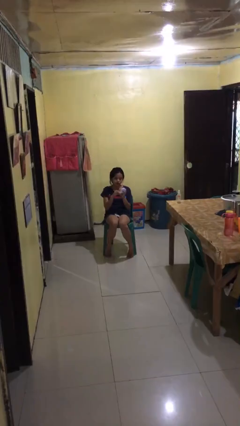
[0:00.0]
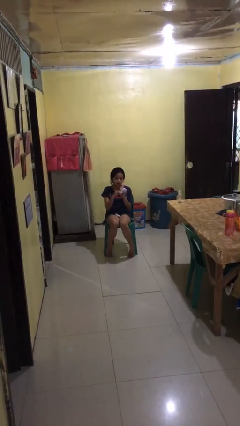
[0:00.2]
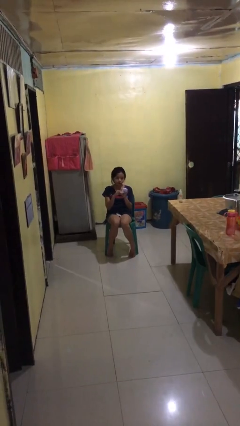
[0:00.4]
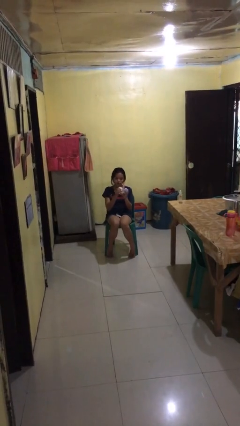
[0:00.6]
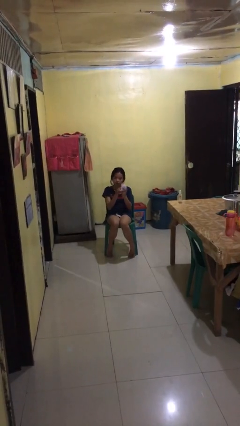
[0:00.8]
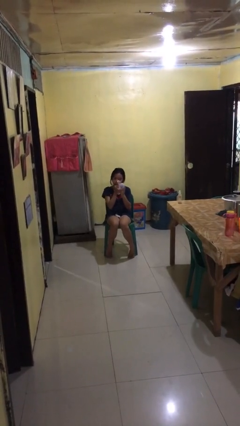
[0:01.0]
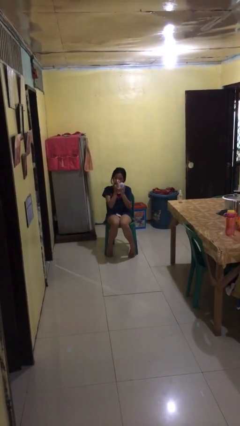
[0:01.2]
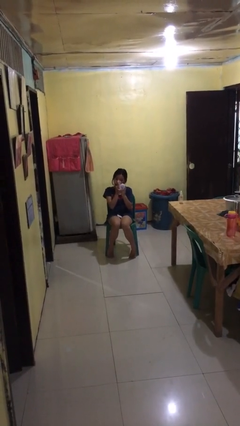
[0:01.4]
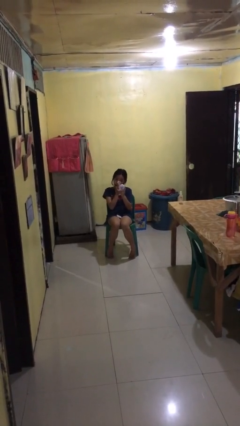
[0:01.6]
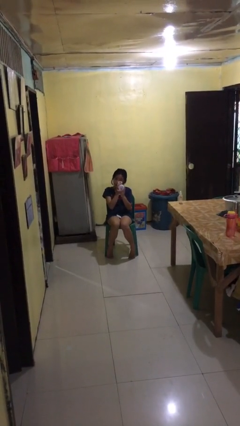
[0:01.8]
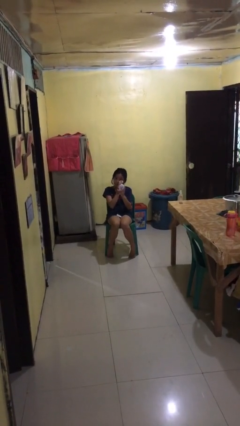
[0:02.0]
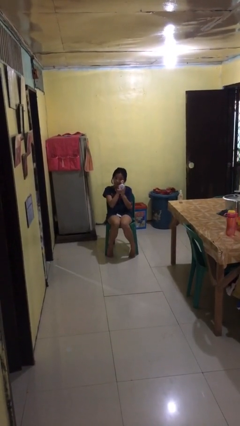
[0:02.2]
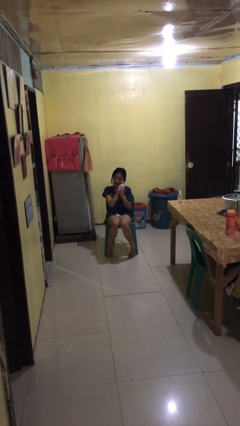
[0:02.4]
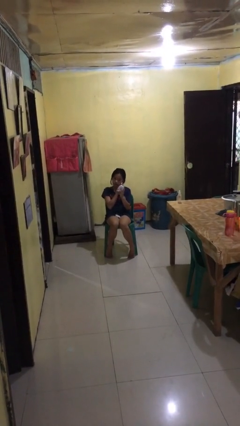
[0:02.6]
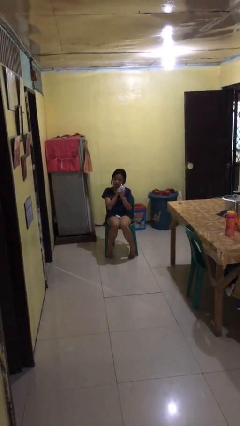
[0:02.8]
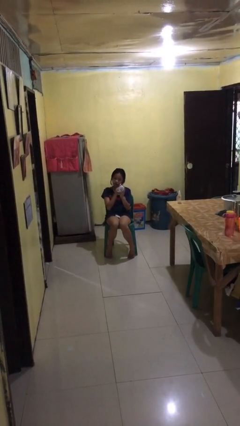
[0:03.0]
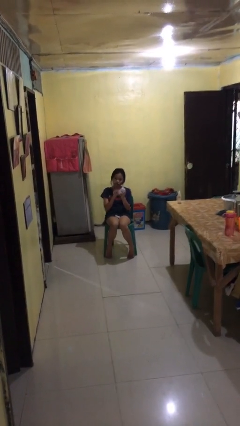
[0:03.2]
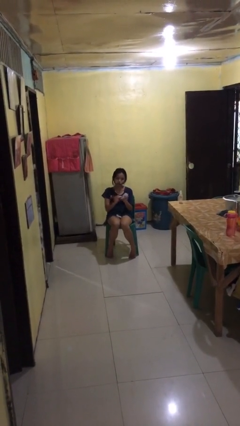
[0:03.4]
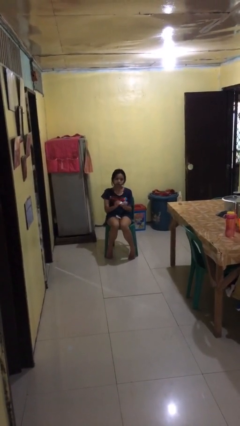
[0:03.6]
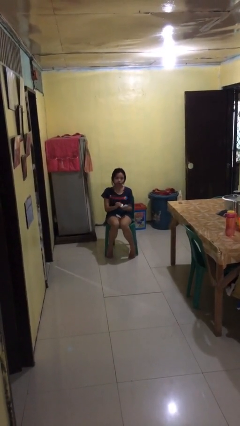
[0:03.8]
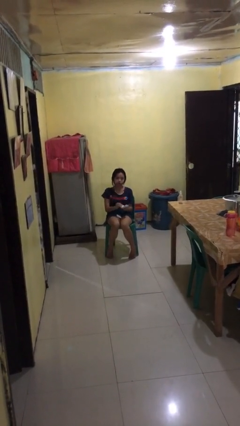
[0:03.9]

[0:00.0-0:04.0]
person applies foundation makeup

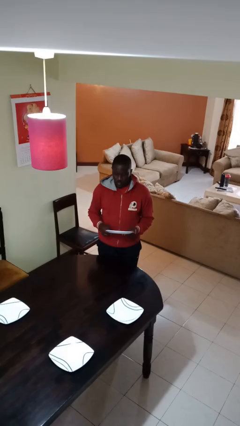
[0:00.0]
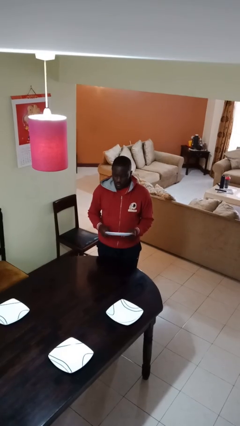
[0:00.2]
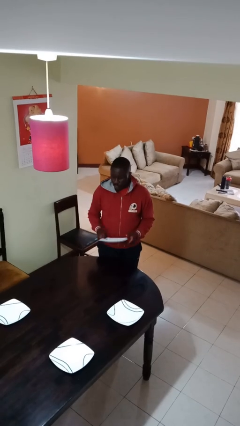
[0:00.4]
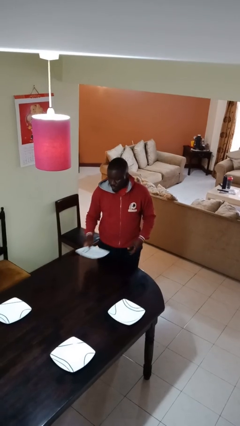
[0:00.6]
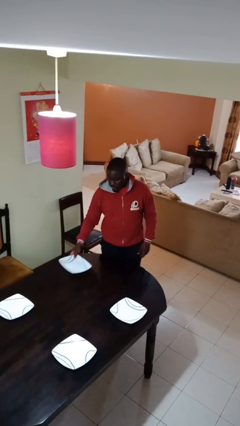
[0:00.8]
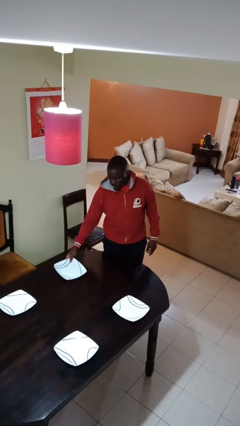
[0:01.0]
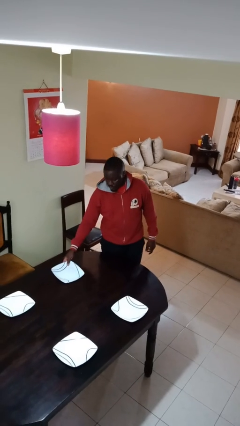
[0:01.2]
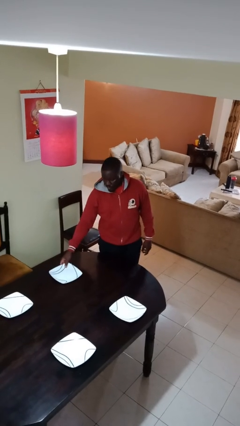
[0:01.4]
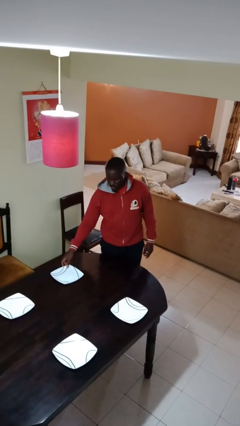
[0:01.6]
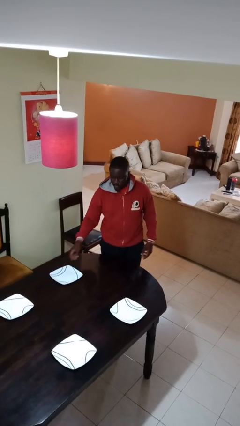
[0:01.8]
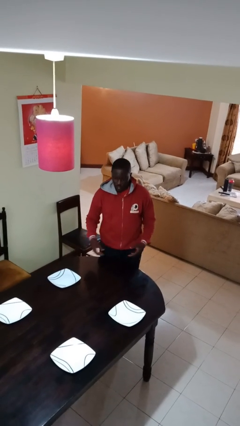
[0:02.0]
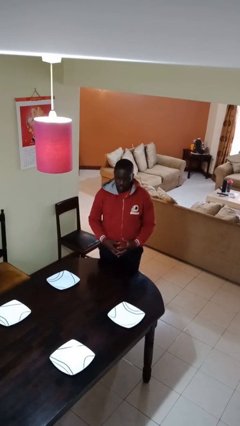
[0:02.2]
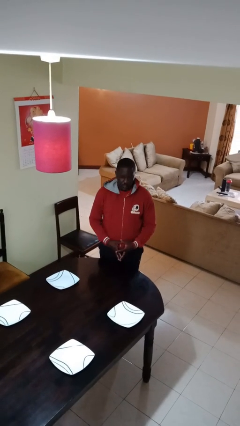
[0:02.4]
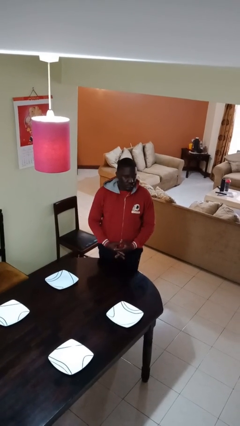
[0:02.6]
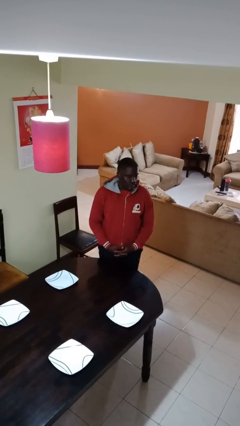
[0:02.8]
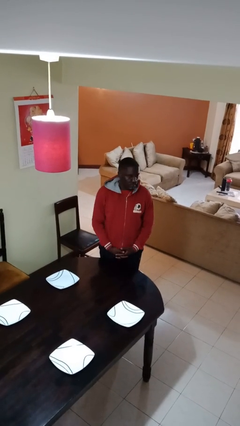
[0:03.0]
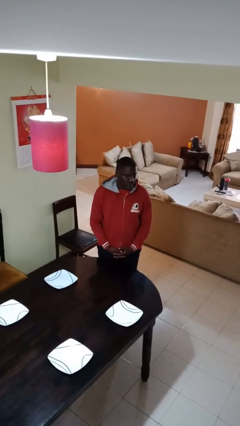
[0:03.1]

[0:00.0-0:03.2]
person sets table

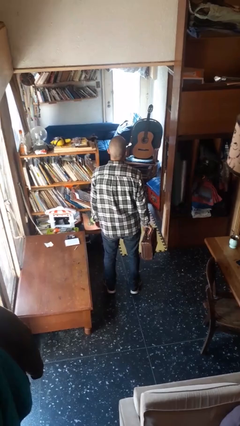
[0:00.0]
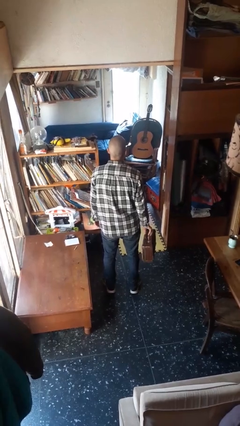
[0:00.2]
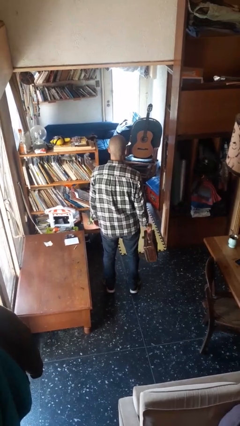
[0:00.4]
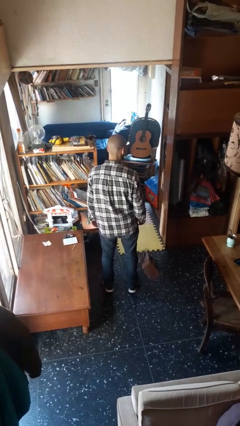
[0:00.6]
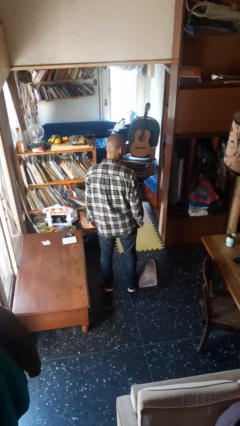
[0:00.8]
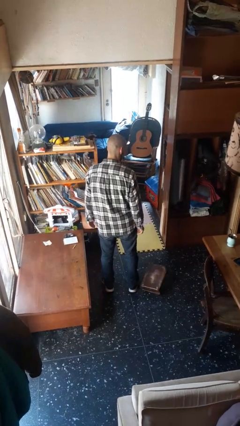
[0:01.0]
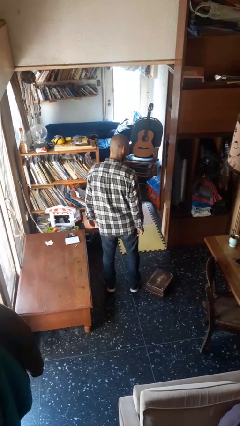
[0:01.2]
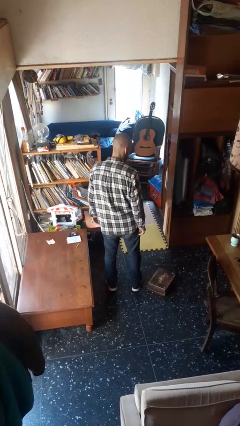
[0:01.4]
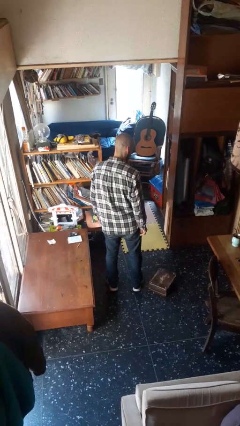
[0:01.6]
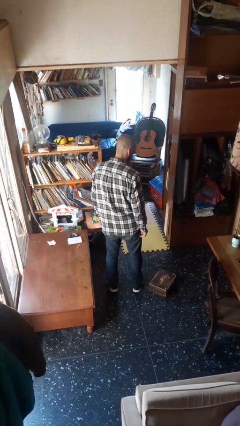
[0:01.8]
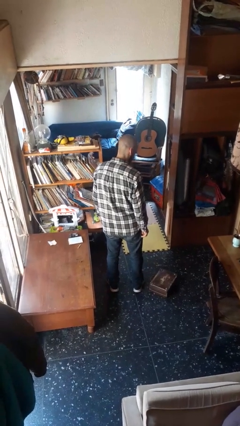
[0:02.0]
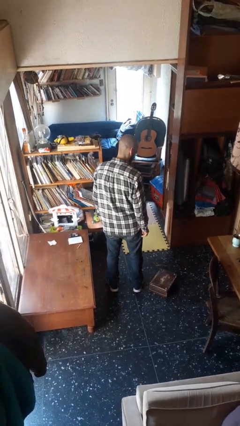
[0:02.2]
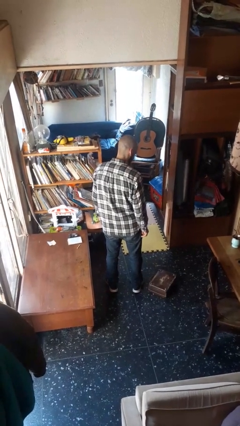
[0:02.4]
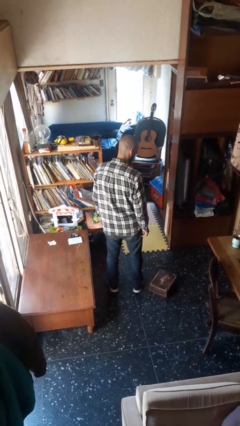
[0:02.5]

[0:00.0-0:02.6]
person drops object

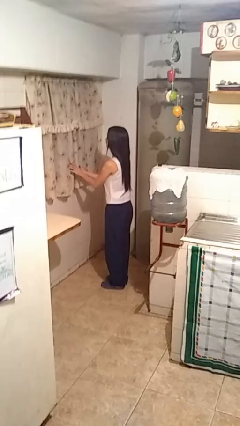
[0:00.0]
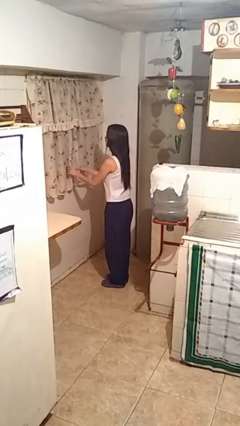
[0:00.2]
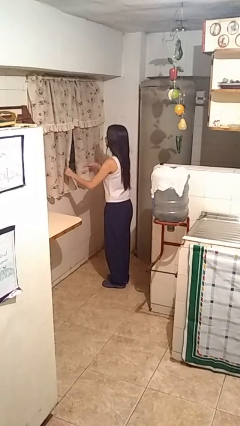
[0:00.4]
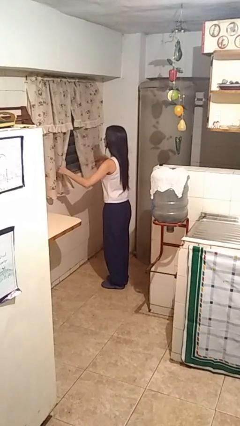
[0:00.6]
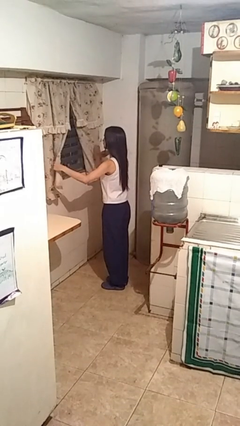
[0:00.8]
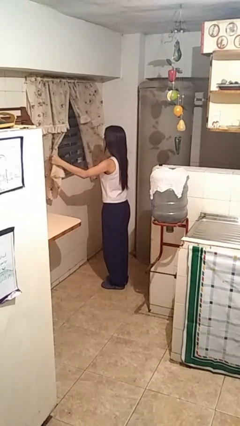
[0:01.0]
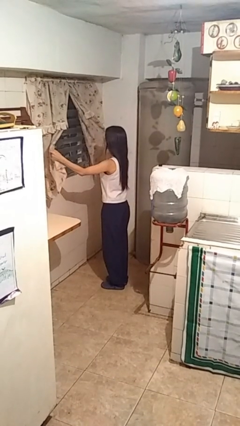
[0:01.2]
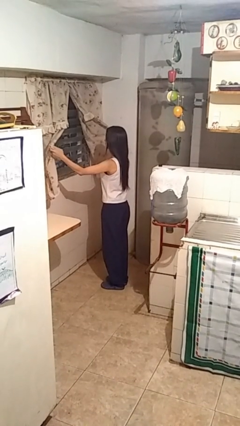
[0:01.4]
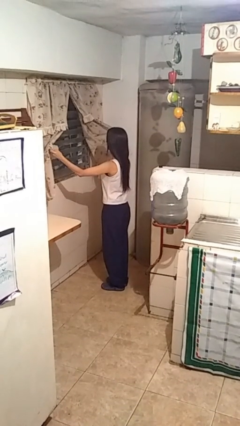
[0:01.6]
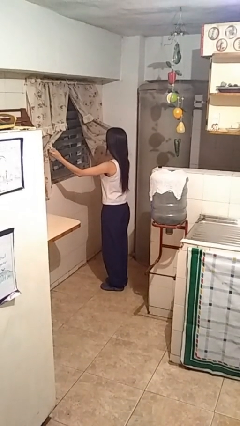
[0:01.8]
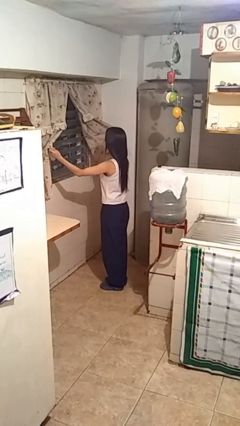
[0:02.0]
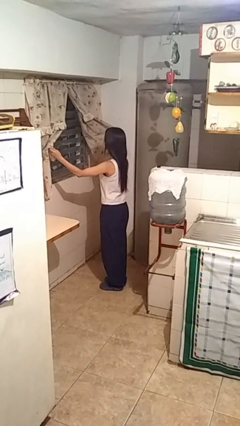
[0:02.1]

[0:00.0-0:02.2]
person opens curtains

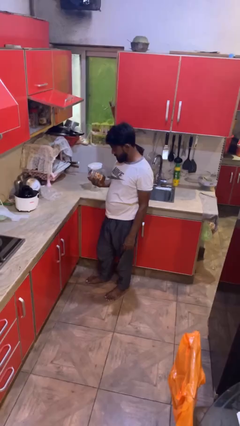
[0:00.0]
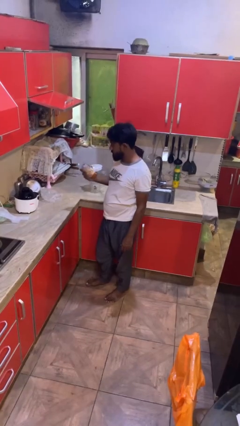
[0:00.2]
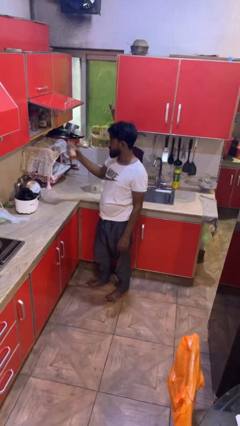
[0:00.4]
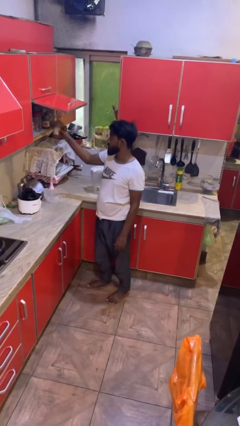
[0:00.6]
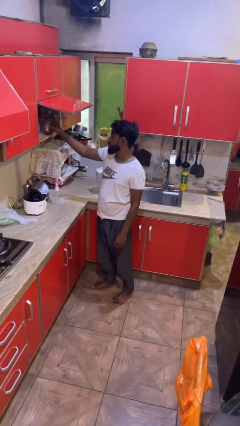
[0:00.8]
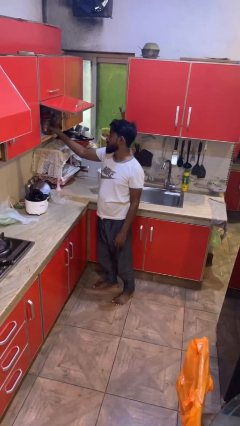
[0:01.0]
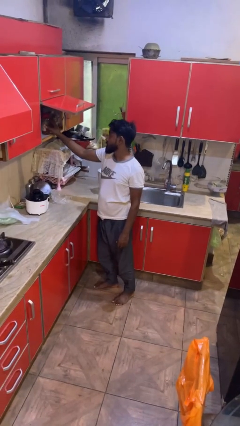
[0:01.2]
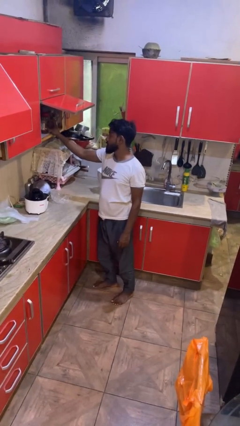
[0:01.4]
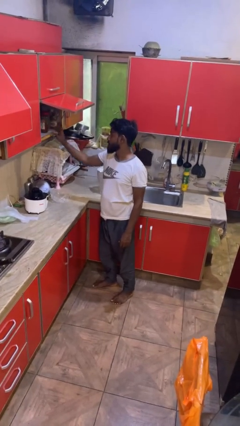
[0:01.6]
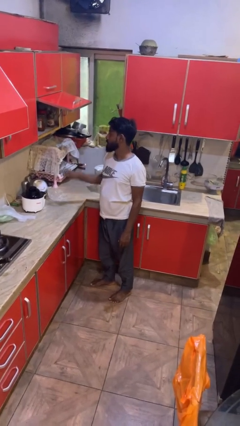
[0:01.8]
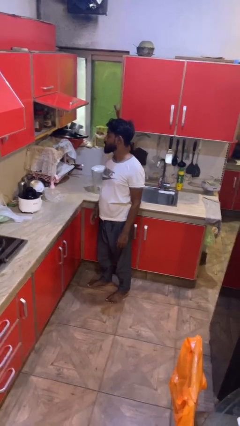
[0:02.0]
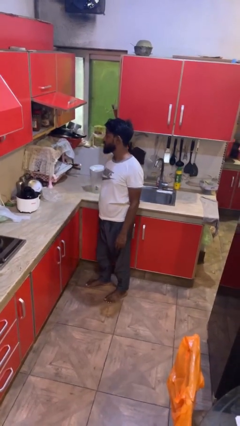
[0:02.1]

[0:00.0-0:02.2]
person puts down object into cabinet

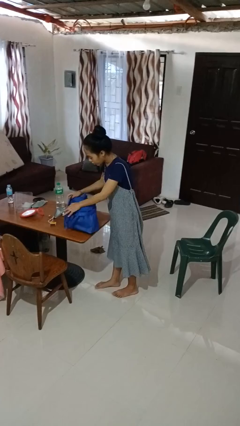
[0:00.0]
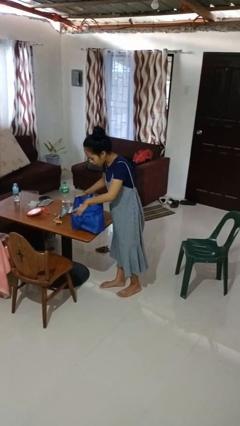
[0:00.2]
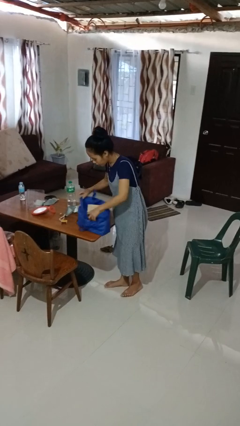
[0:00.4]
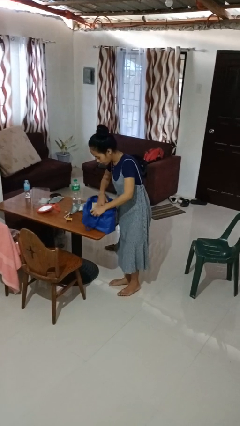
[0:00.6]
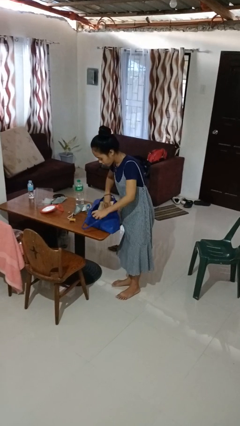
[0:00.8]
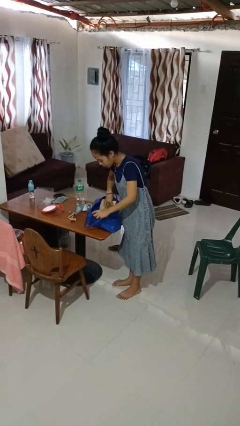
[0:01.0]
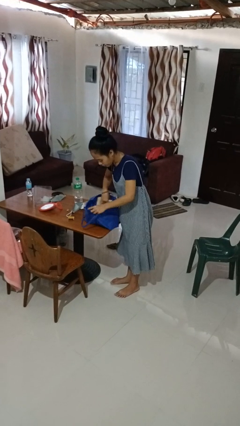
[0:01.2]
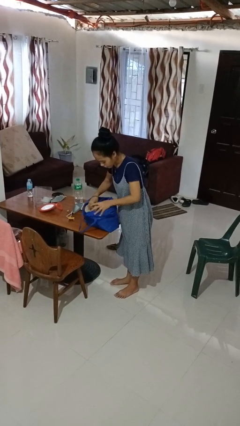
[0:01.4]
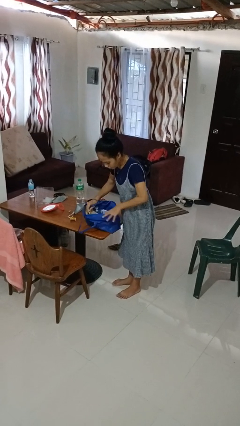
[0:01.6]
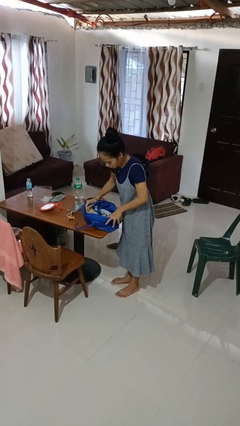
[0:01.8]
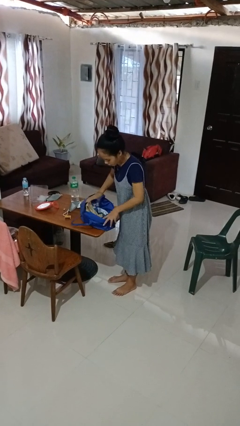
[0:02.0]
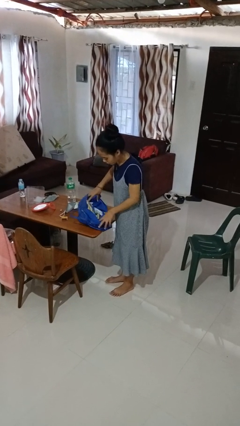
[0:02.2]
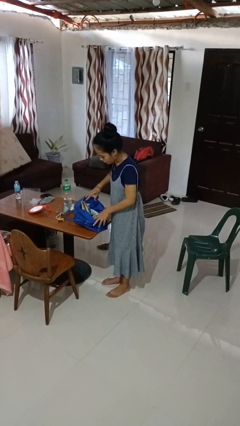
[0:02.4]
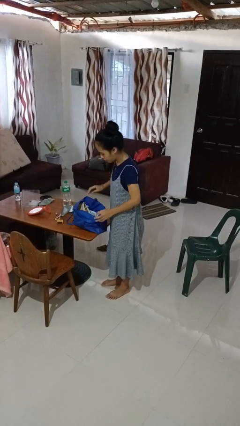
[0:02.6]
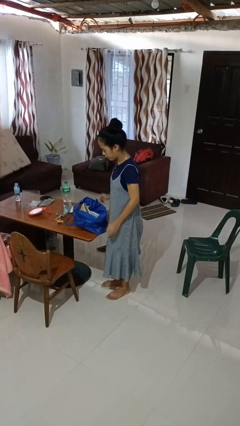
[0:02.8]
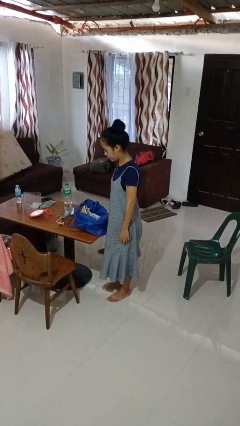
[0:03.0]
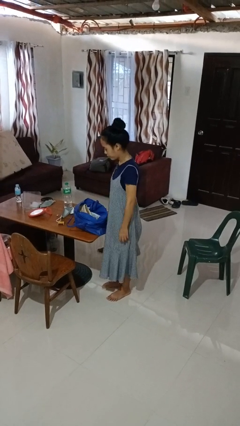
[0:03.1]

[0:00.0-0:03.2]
person searches in bag
